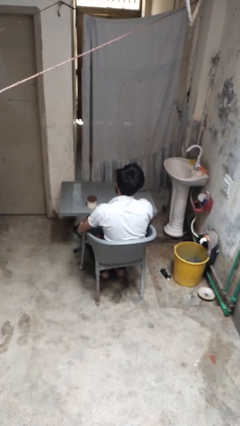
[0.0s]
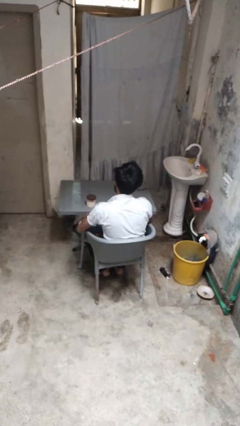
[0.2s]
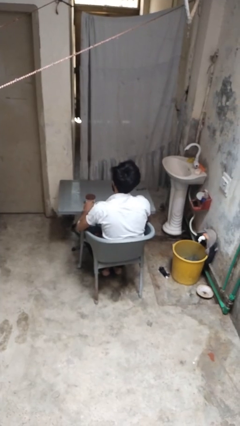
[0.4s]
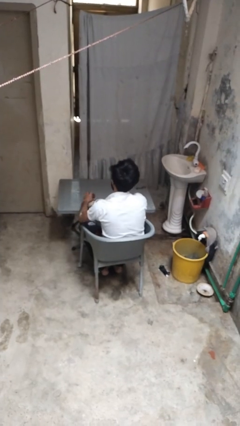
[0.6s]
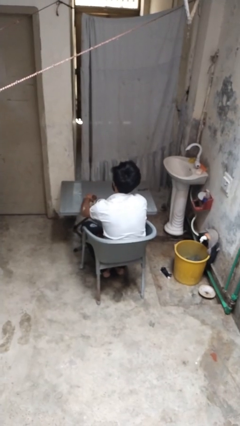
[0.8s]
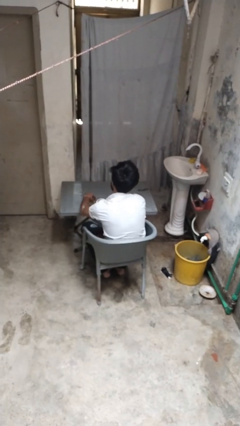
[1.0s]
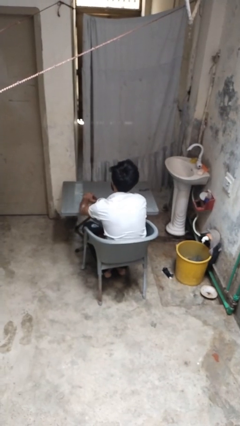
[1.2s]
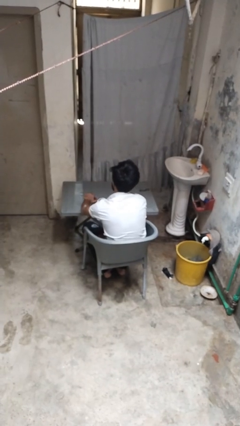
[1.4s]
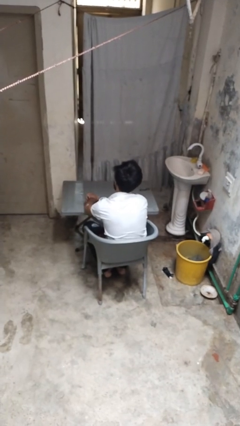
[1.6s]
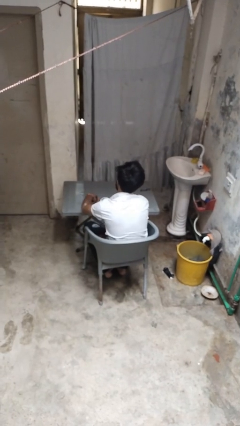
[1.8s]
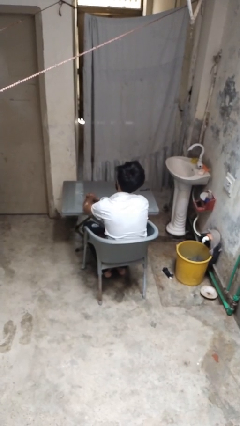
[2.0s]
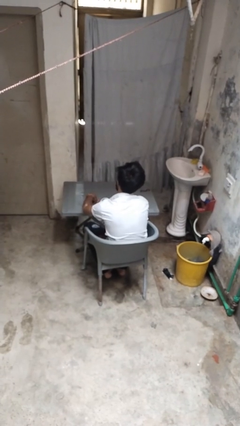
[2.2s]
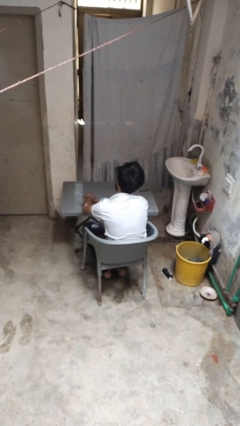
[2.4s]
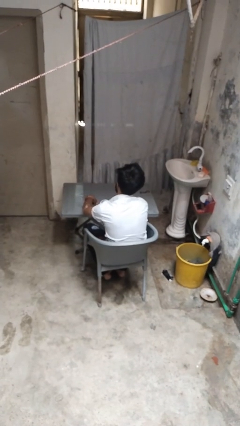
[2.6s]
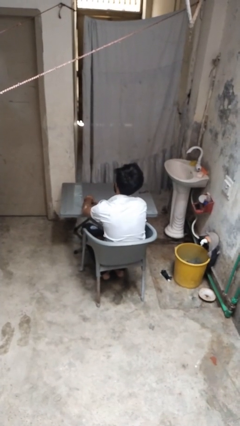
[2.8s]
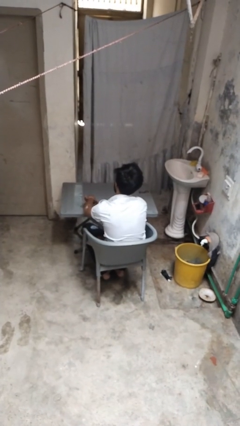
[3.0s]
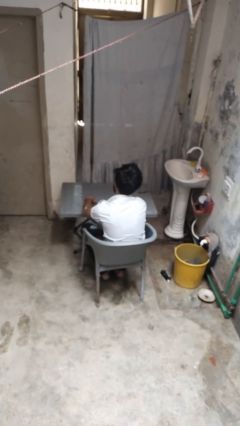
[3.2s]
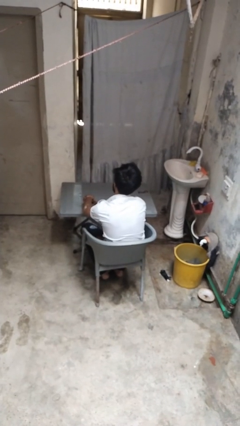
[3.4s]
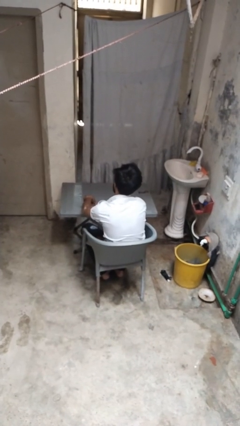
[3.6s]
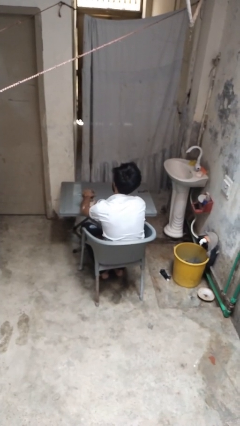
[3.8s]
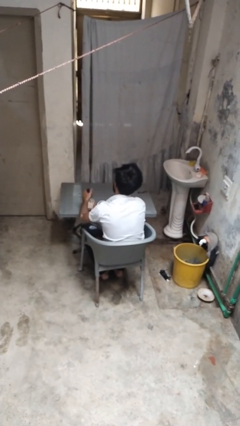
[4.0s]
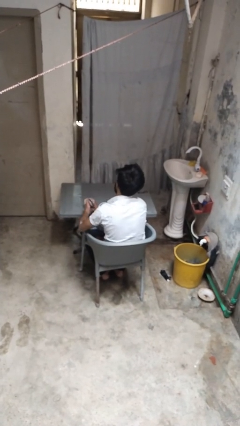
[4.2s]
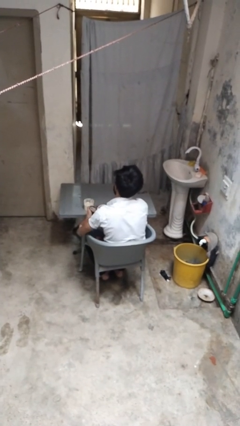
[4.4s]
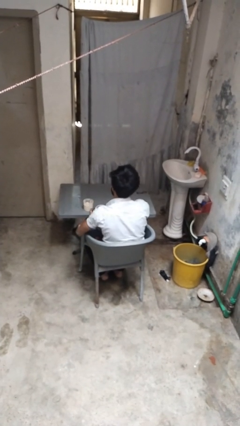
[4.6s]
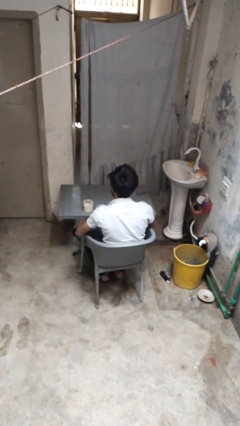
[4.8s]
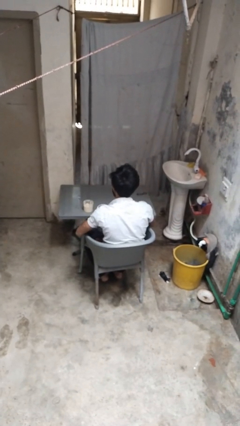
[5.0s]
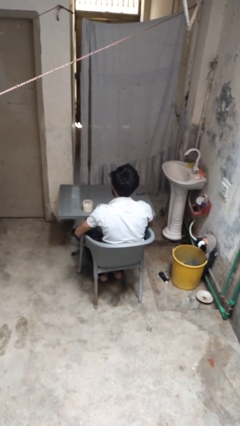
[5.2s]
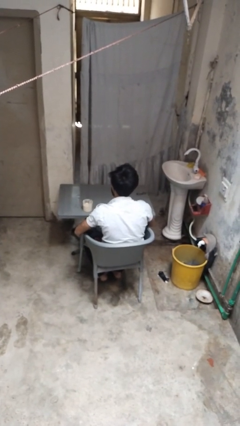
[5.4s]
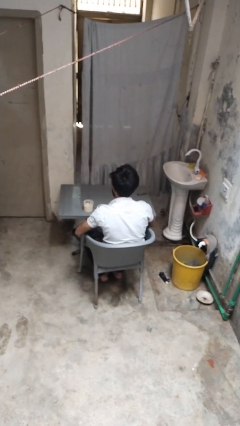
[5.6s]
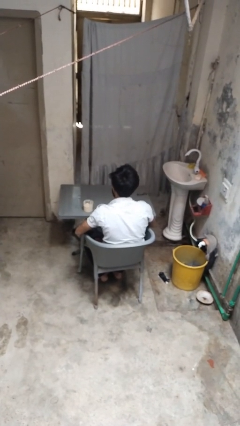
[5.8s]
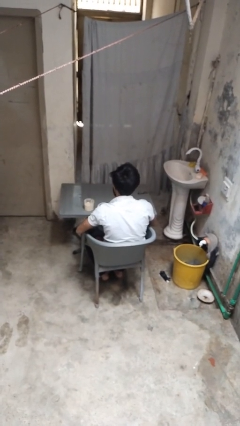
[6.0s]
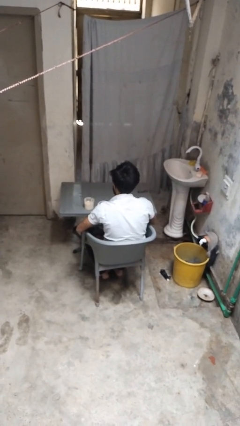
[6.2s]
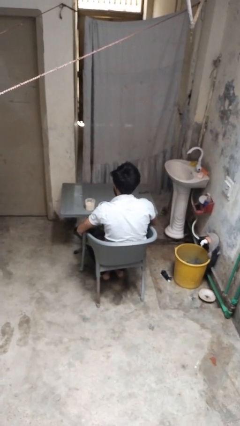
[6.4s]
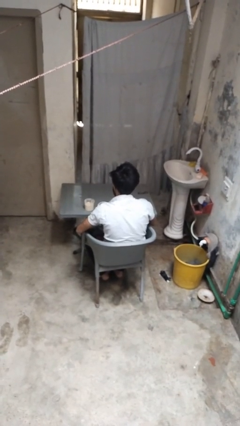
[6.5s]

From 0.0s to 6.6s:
person opens jar

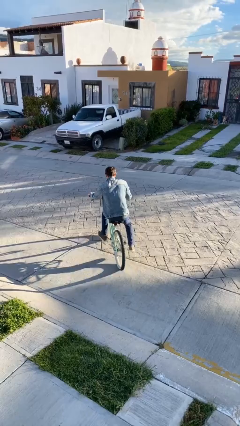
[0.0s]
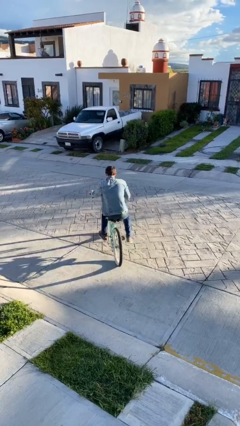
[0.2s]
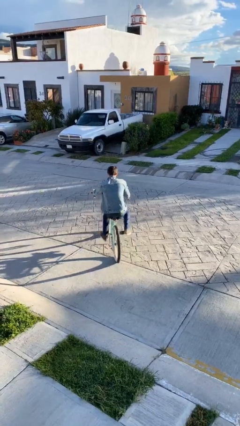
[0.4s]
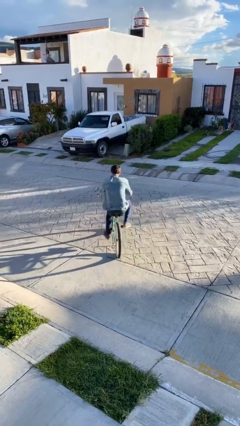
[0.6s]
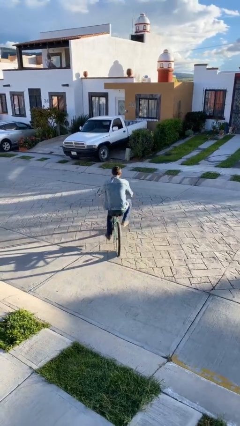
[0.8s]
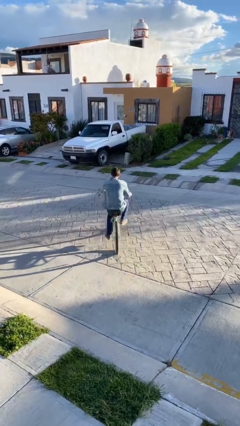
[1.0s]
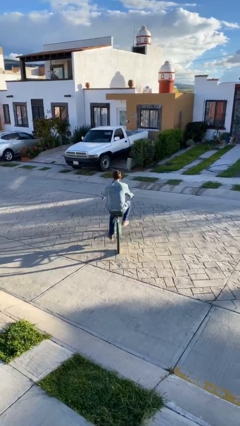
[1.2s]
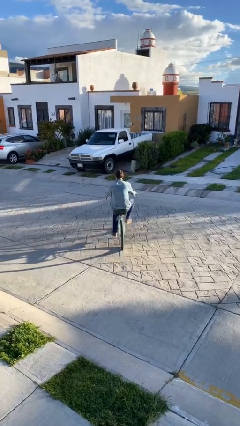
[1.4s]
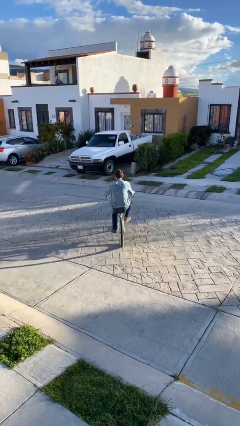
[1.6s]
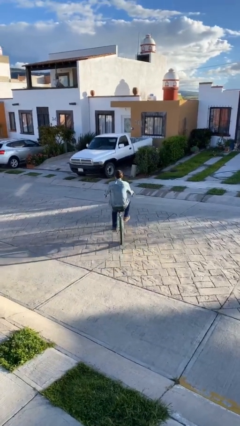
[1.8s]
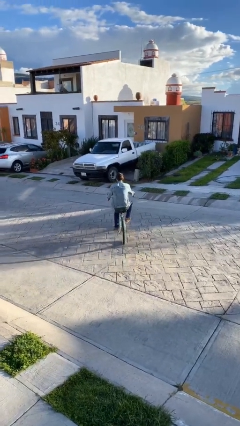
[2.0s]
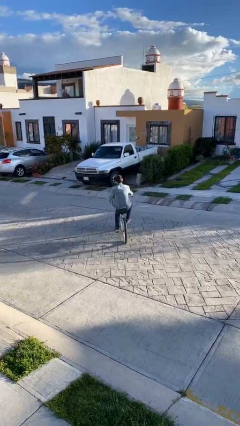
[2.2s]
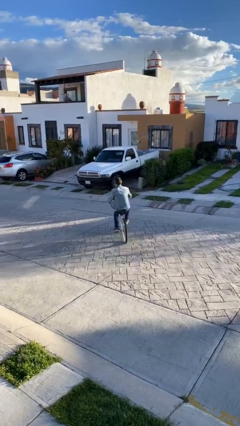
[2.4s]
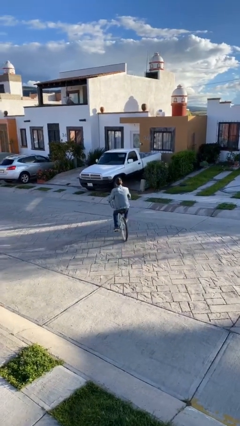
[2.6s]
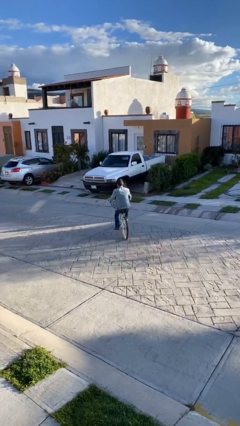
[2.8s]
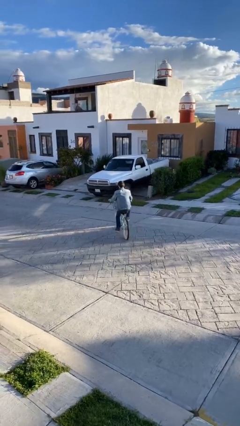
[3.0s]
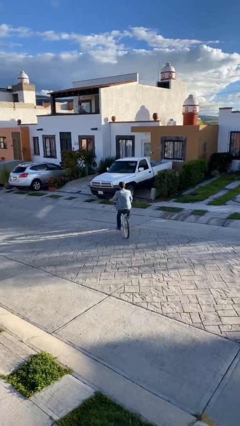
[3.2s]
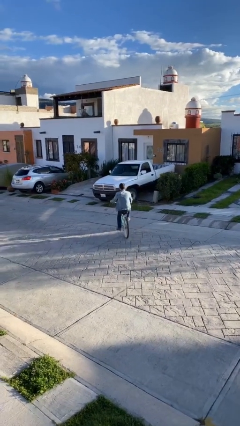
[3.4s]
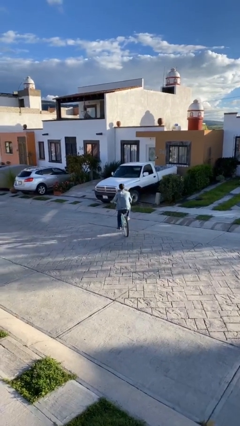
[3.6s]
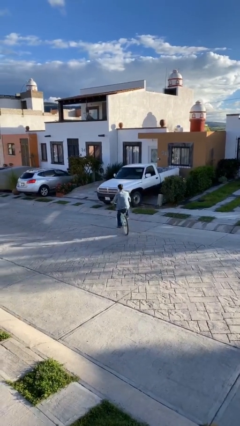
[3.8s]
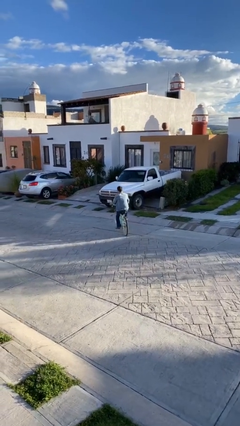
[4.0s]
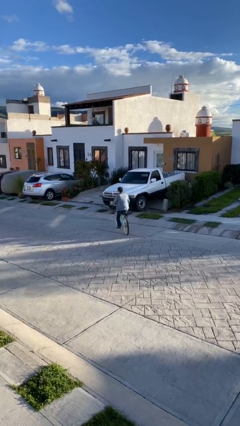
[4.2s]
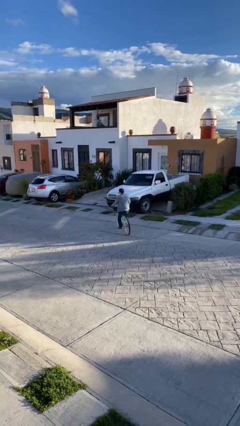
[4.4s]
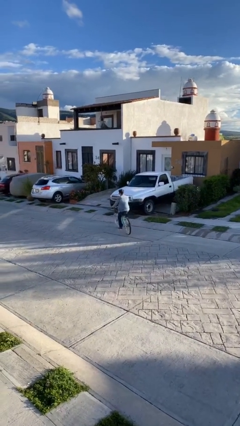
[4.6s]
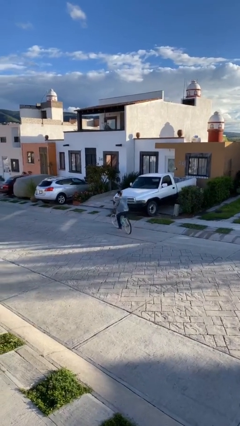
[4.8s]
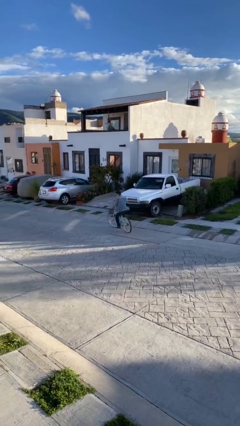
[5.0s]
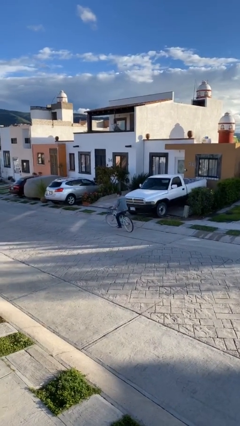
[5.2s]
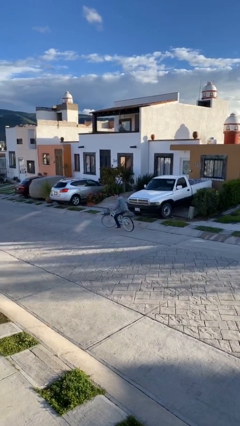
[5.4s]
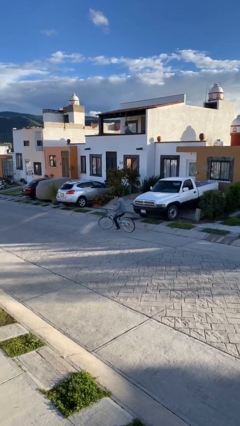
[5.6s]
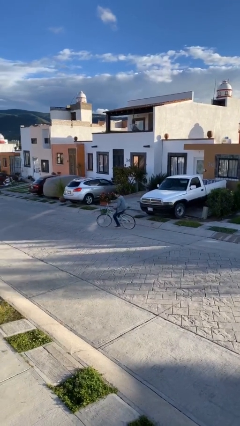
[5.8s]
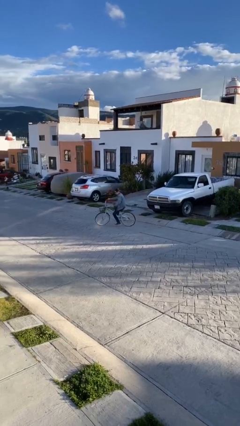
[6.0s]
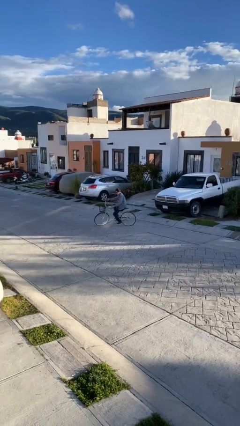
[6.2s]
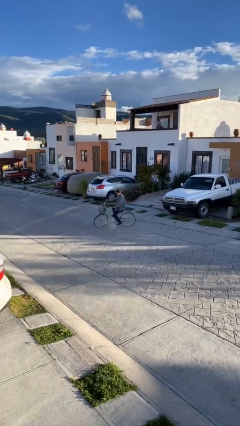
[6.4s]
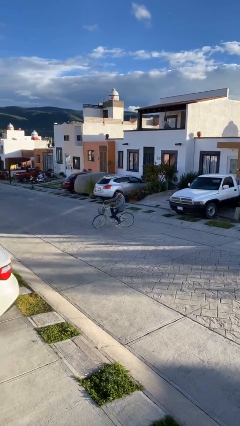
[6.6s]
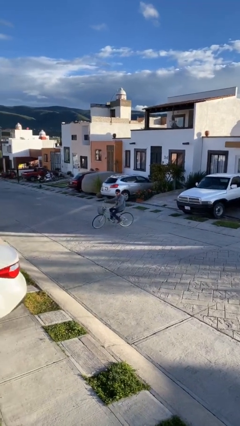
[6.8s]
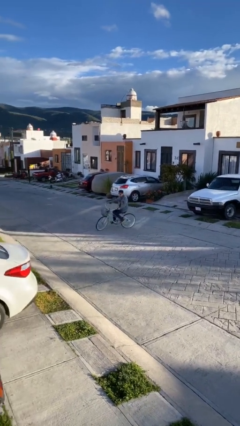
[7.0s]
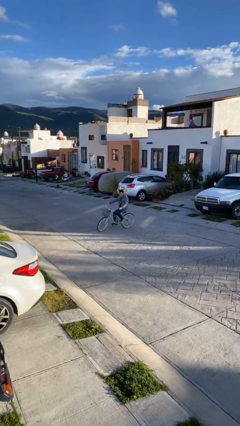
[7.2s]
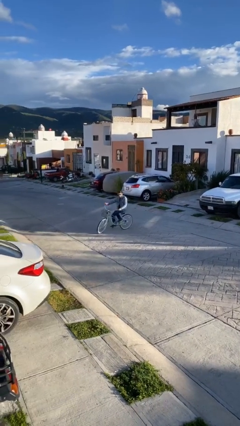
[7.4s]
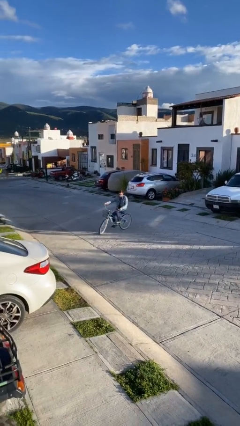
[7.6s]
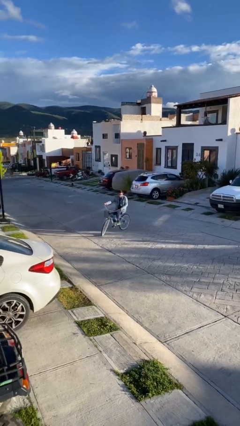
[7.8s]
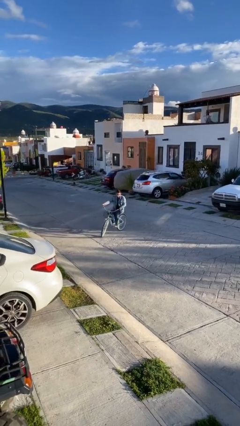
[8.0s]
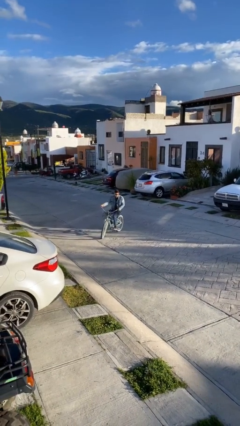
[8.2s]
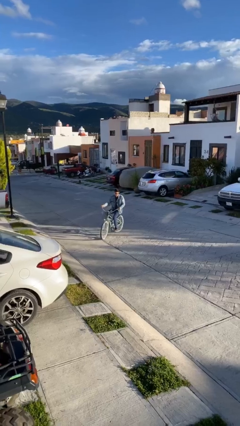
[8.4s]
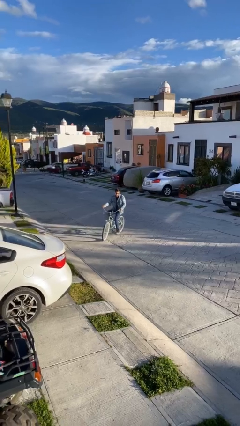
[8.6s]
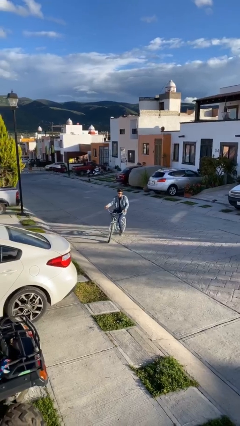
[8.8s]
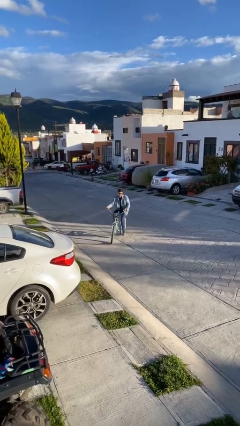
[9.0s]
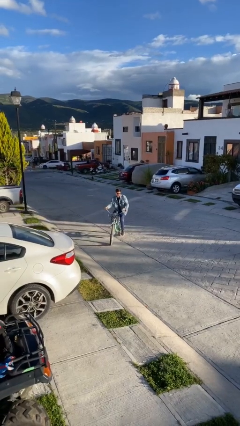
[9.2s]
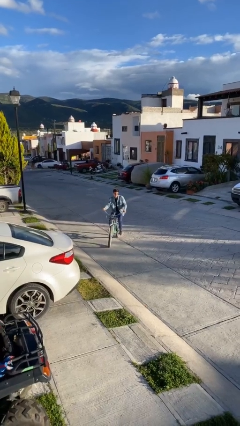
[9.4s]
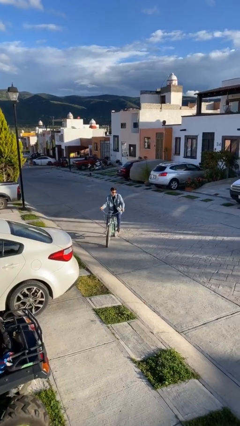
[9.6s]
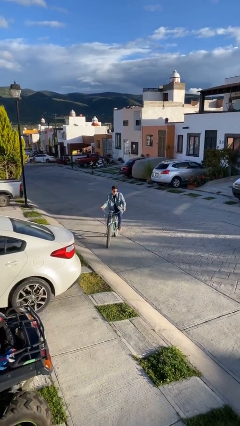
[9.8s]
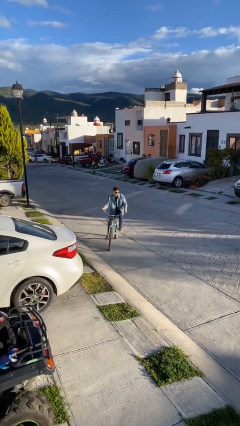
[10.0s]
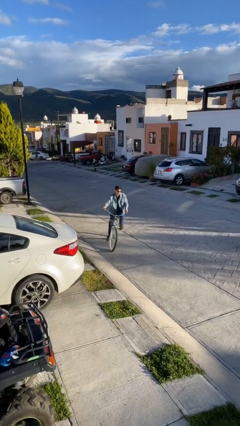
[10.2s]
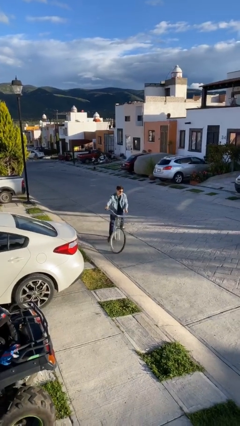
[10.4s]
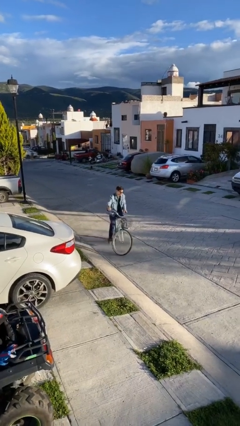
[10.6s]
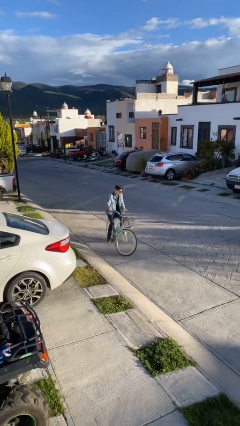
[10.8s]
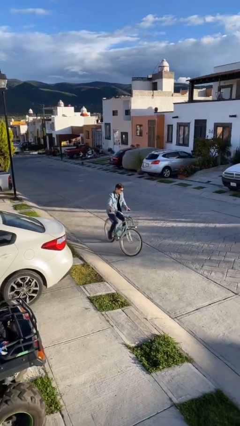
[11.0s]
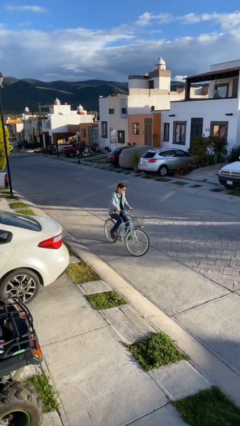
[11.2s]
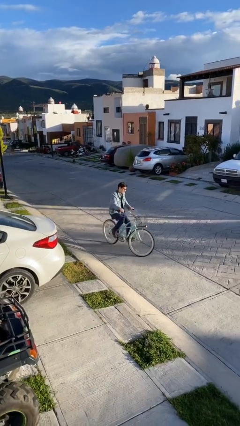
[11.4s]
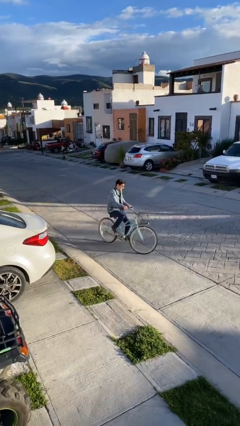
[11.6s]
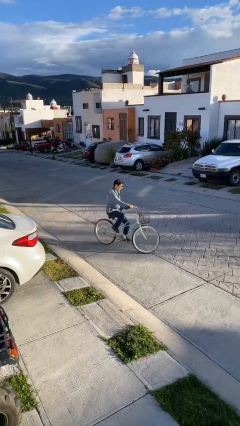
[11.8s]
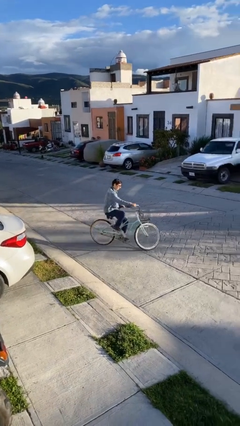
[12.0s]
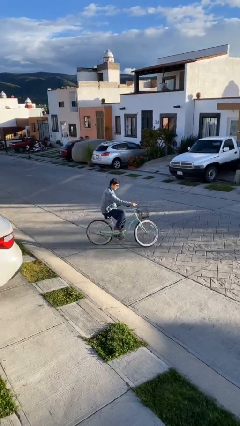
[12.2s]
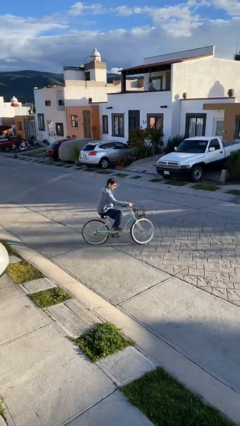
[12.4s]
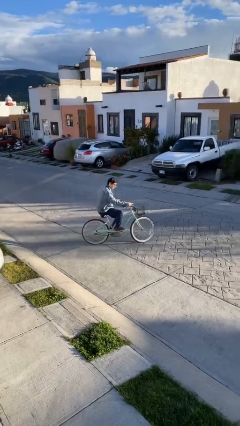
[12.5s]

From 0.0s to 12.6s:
person rides bicycle
